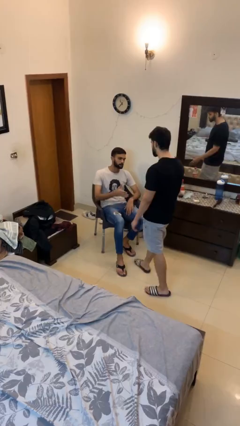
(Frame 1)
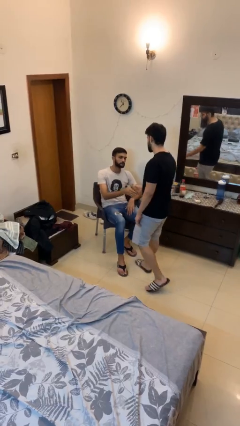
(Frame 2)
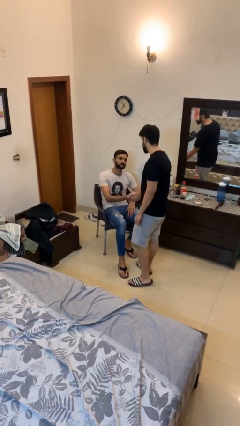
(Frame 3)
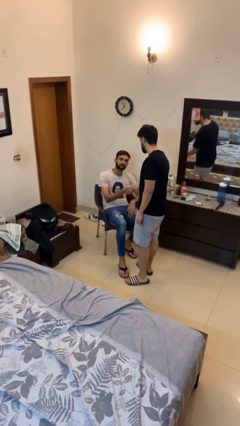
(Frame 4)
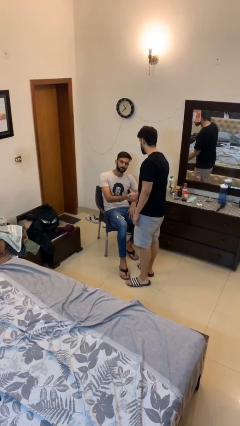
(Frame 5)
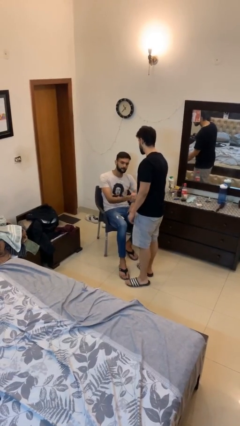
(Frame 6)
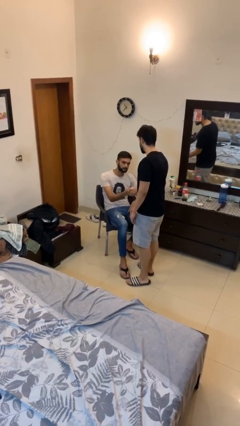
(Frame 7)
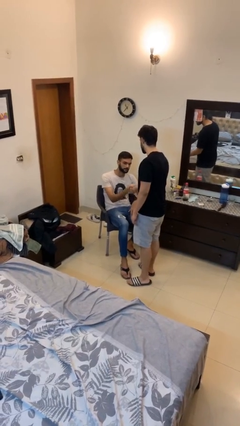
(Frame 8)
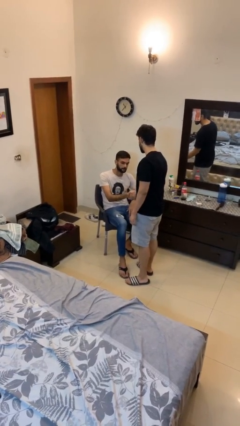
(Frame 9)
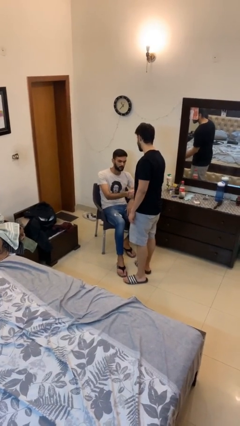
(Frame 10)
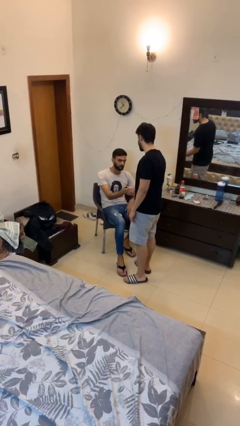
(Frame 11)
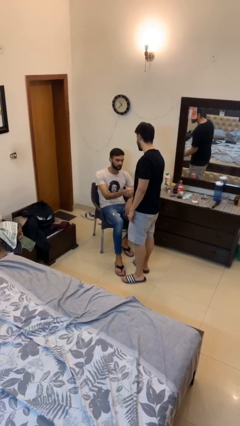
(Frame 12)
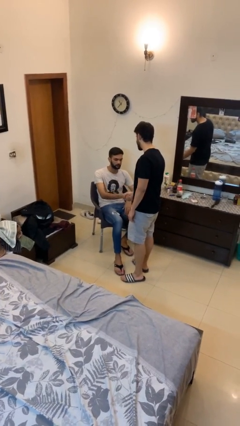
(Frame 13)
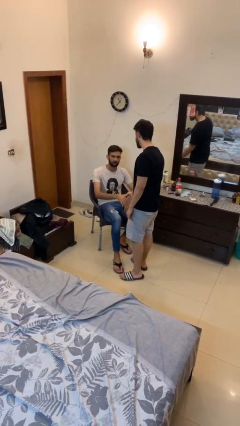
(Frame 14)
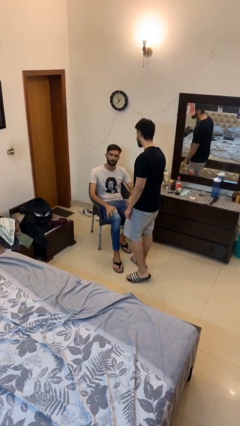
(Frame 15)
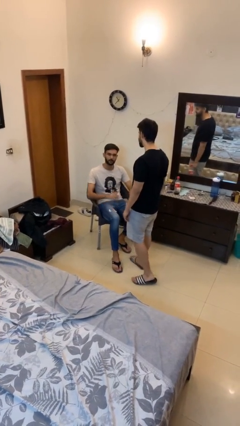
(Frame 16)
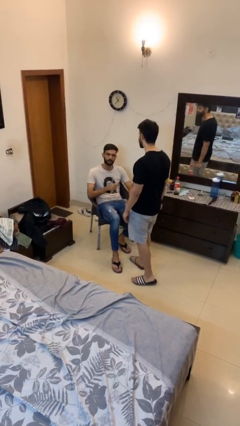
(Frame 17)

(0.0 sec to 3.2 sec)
person shakes hand

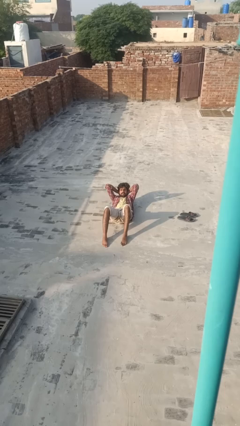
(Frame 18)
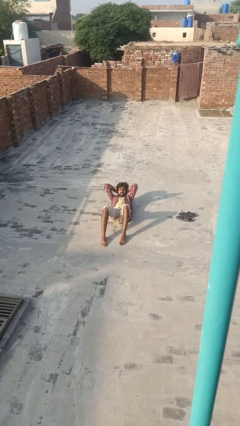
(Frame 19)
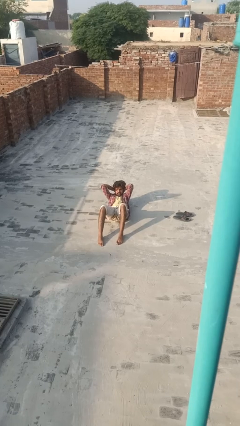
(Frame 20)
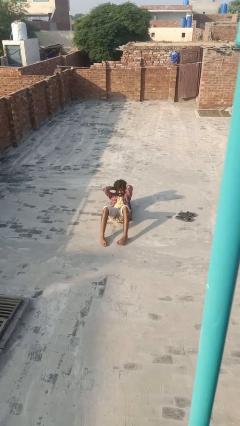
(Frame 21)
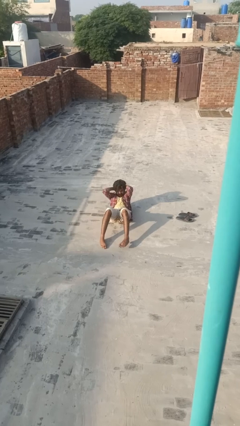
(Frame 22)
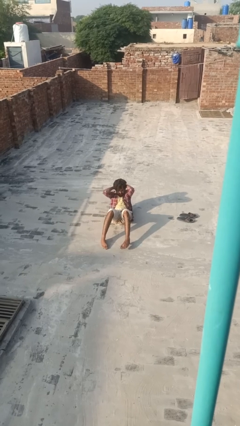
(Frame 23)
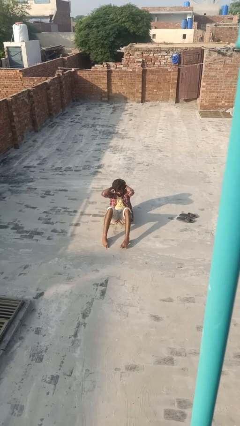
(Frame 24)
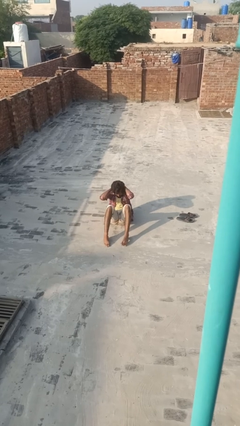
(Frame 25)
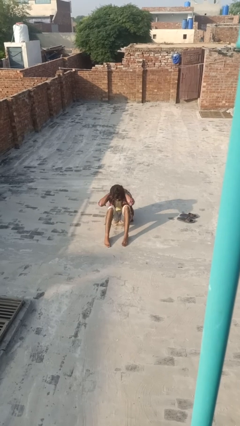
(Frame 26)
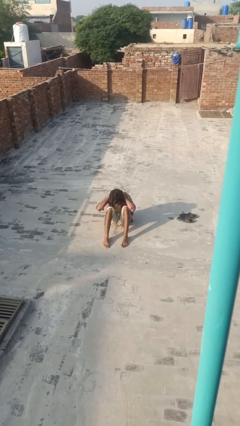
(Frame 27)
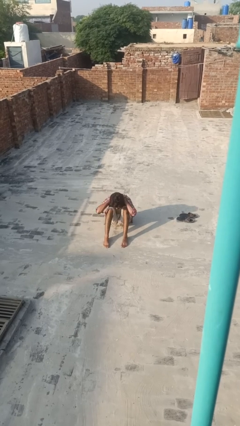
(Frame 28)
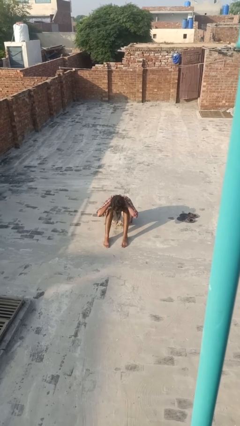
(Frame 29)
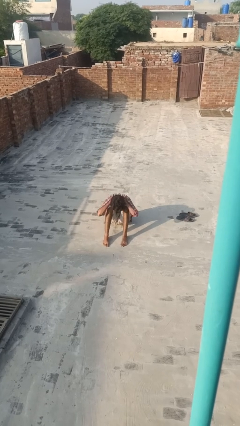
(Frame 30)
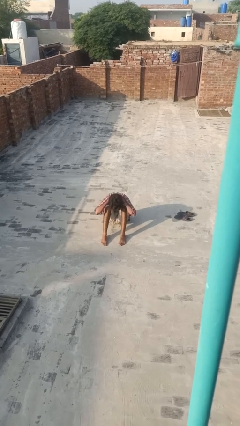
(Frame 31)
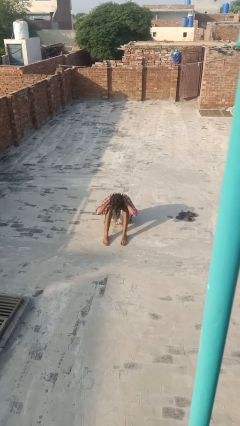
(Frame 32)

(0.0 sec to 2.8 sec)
person exercises with situp

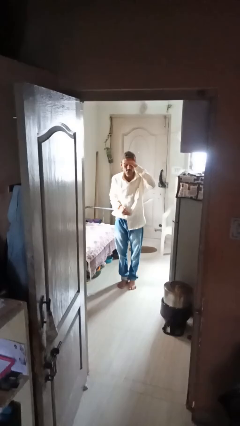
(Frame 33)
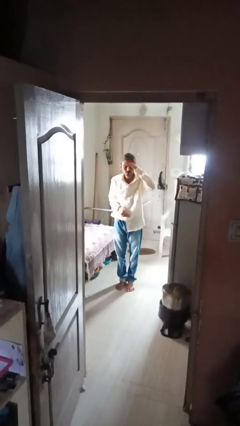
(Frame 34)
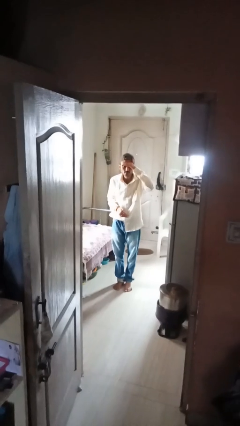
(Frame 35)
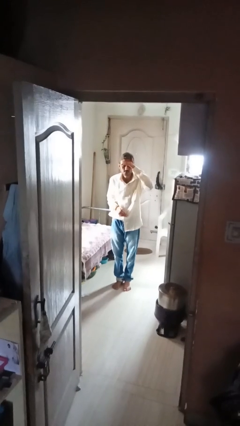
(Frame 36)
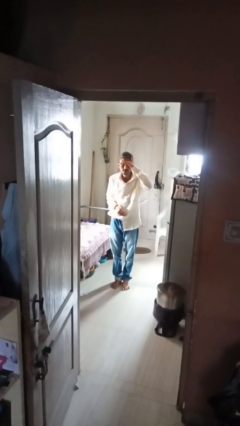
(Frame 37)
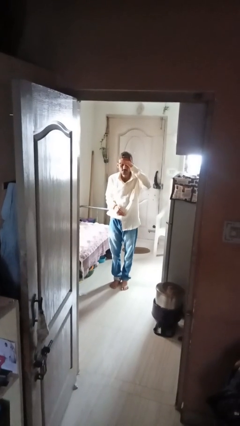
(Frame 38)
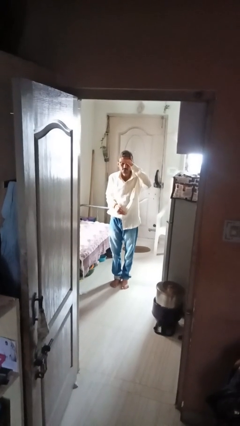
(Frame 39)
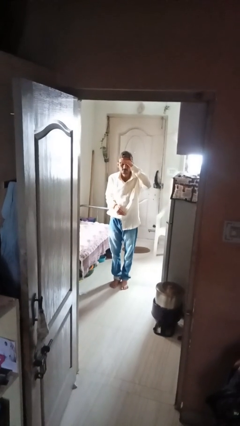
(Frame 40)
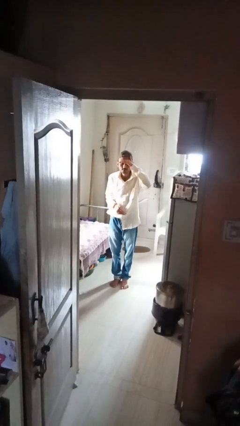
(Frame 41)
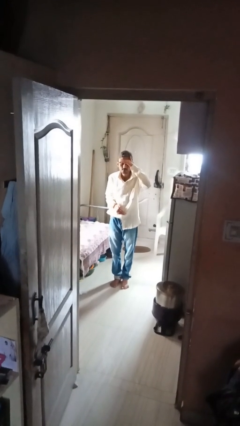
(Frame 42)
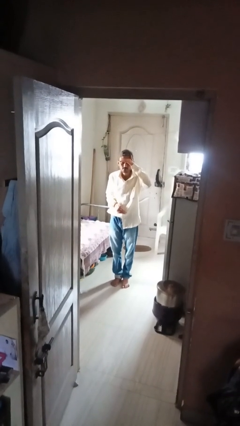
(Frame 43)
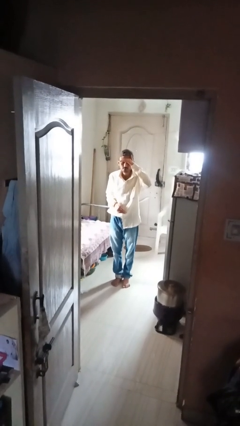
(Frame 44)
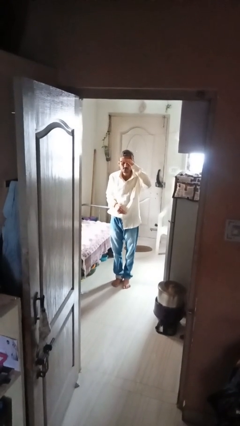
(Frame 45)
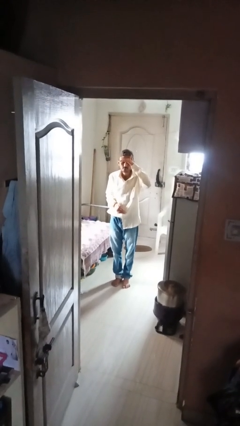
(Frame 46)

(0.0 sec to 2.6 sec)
person shades eyes

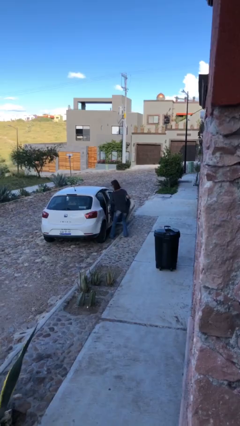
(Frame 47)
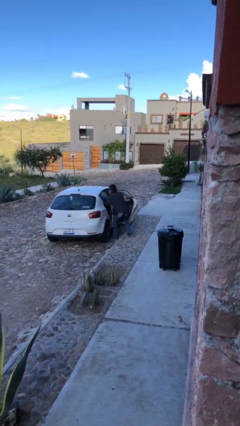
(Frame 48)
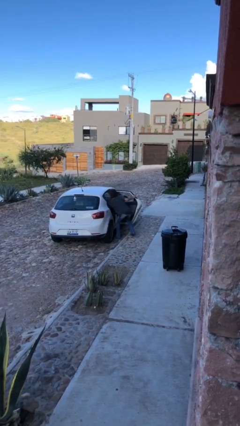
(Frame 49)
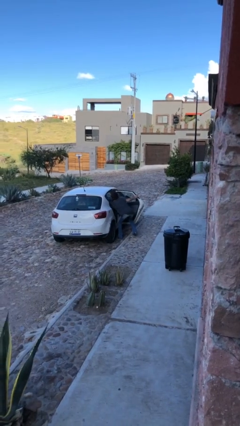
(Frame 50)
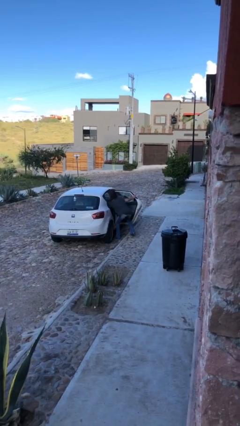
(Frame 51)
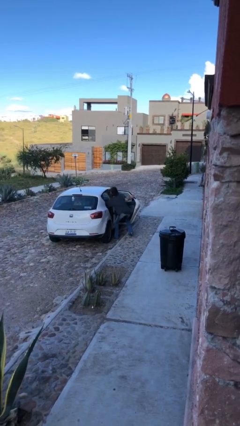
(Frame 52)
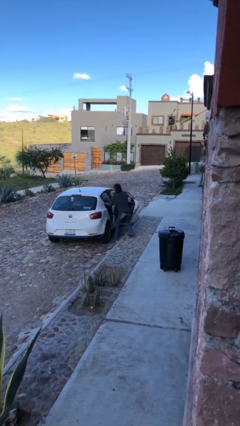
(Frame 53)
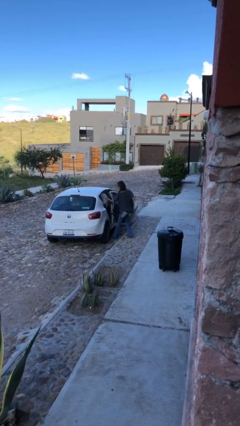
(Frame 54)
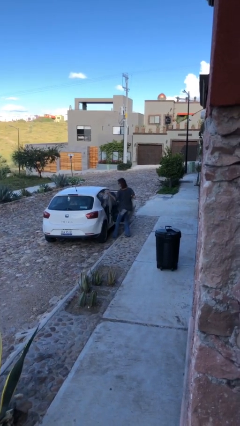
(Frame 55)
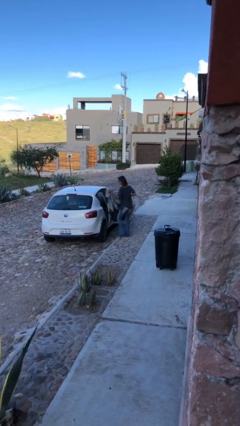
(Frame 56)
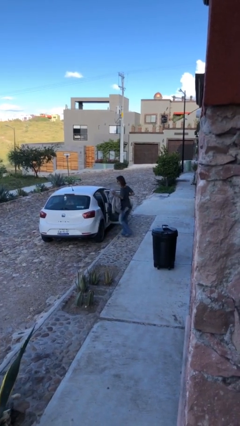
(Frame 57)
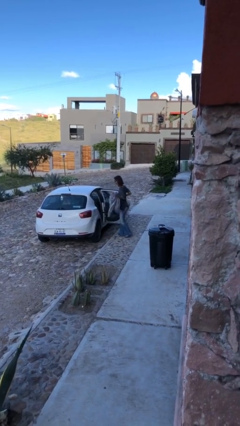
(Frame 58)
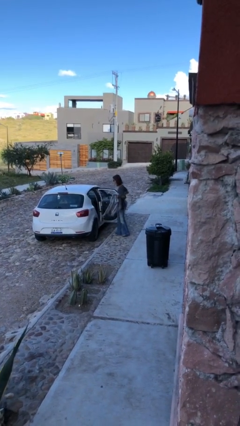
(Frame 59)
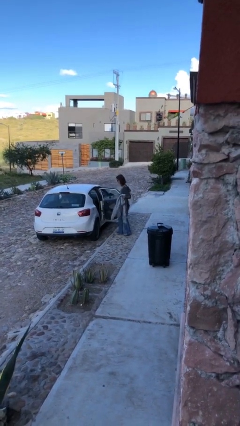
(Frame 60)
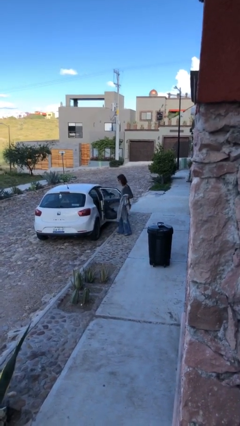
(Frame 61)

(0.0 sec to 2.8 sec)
person unloads car

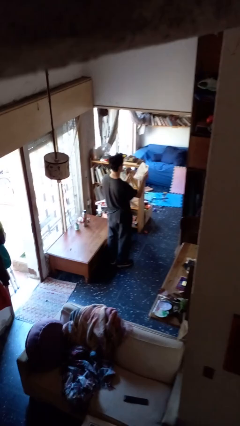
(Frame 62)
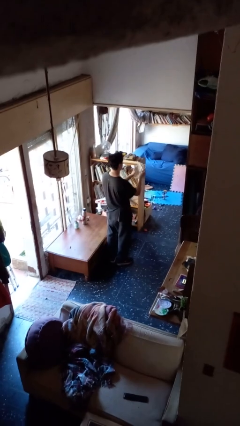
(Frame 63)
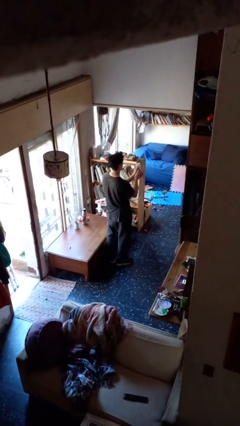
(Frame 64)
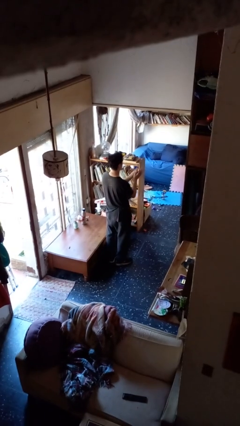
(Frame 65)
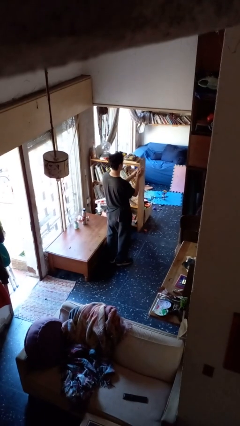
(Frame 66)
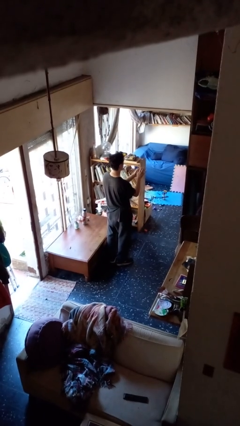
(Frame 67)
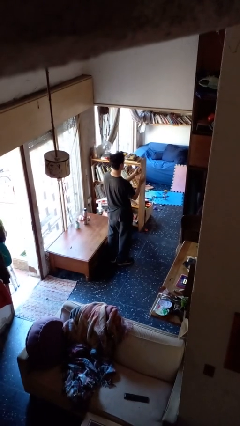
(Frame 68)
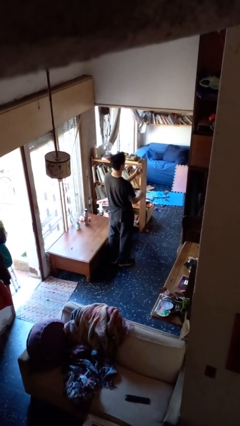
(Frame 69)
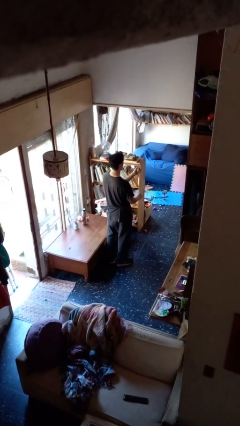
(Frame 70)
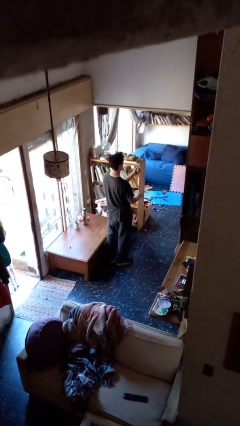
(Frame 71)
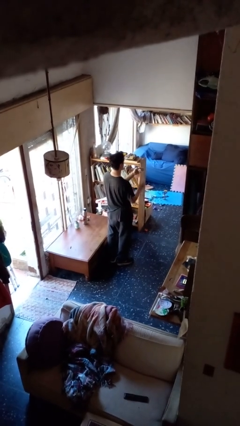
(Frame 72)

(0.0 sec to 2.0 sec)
person crumples paper

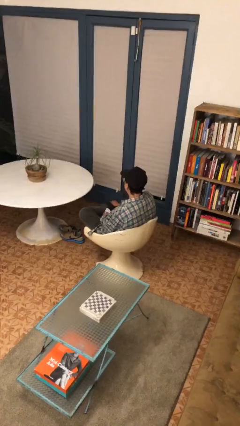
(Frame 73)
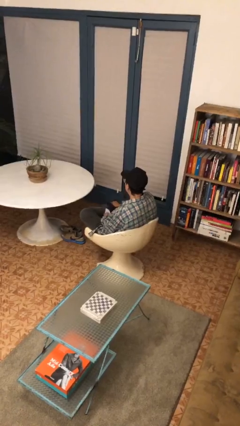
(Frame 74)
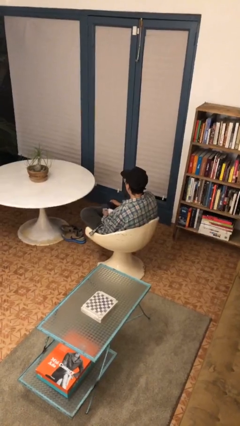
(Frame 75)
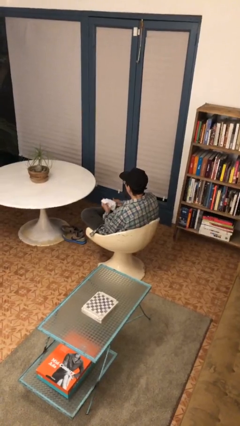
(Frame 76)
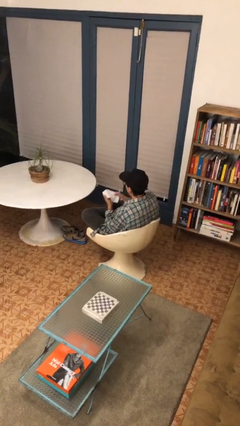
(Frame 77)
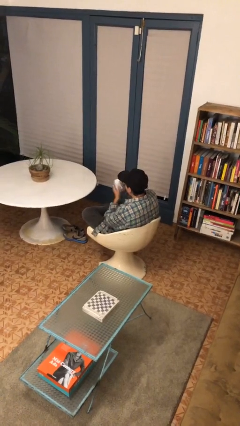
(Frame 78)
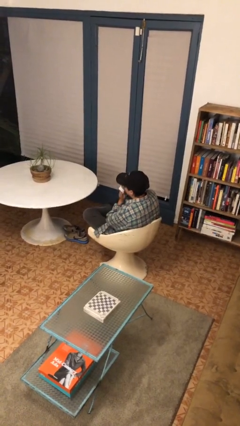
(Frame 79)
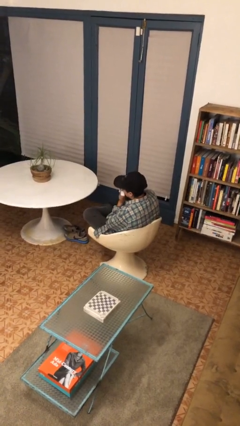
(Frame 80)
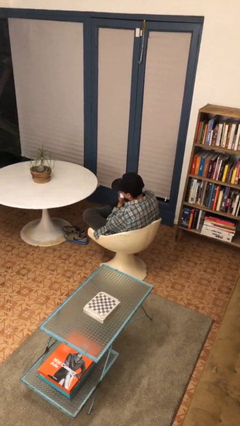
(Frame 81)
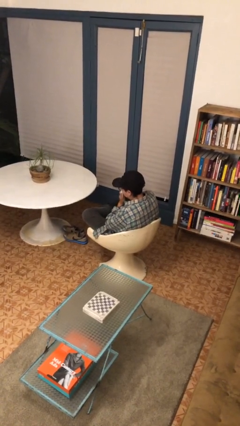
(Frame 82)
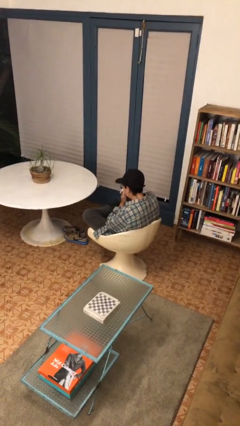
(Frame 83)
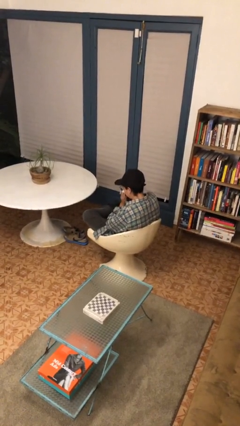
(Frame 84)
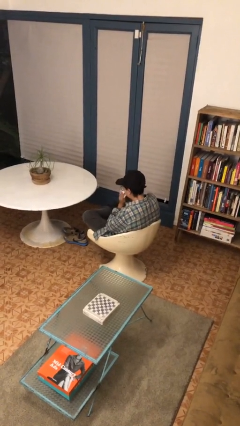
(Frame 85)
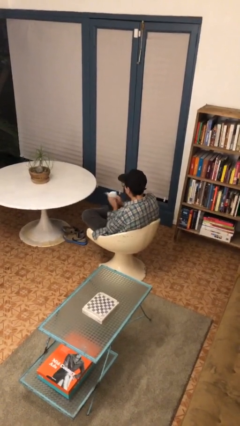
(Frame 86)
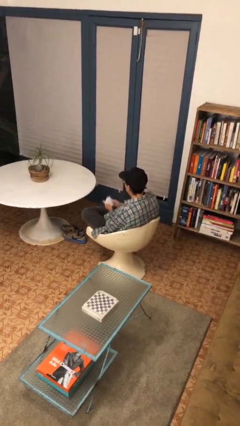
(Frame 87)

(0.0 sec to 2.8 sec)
person blows nose

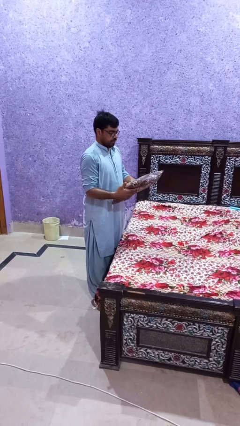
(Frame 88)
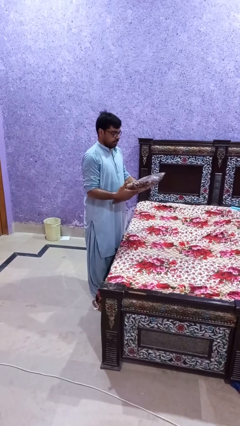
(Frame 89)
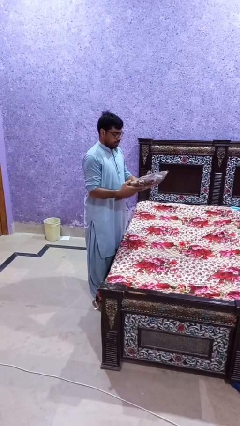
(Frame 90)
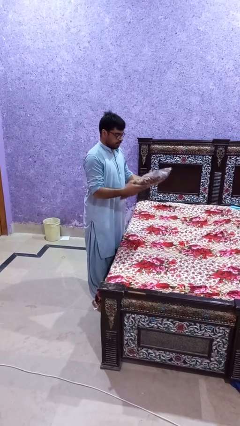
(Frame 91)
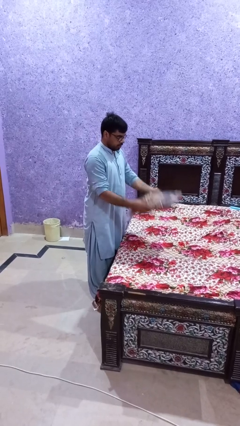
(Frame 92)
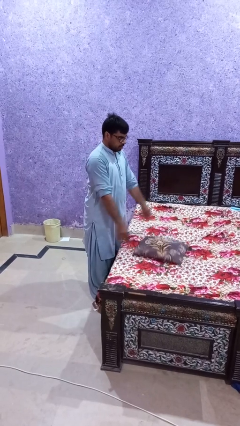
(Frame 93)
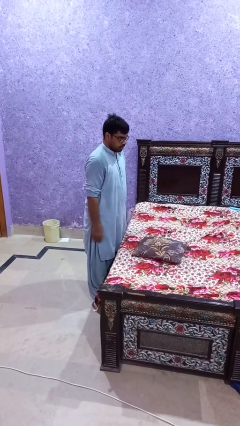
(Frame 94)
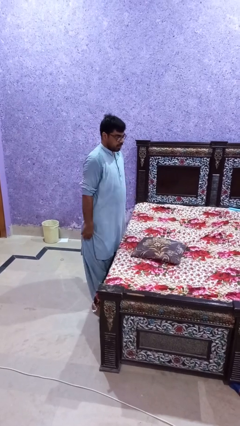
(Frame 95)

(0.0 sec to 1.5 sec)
person puts down object on bed
